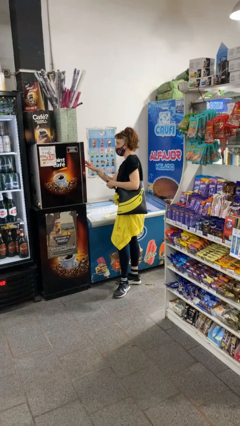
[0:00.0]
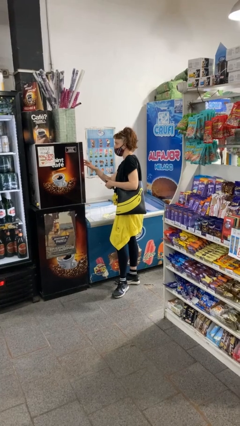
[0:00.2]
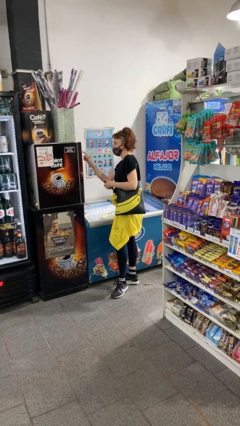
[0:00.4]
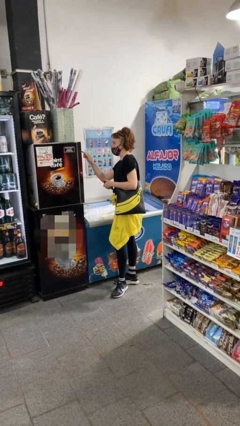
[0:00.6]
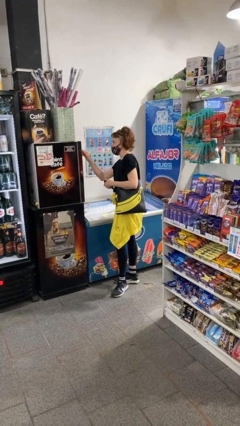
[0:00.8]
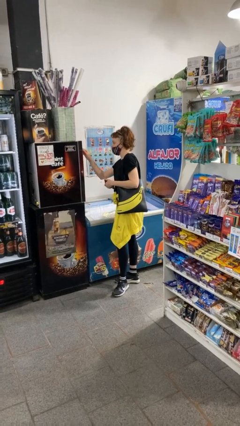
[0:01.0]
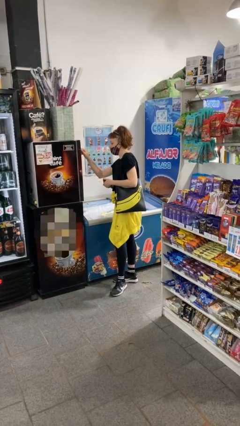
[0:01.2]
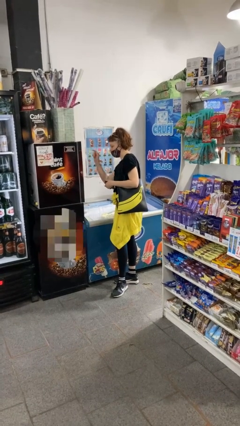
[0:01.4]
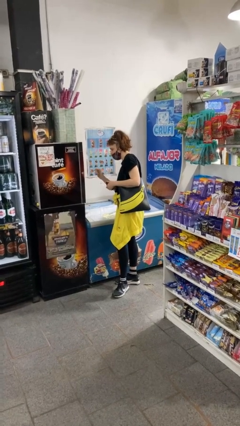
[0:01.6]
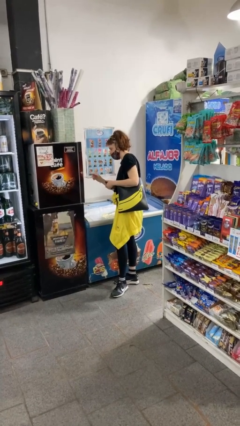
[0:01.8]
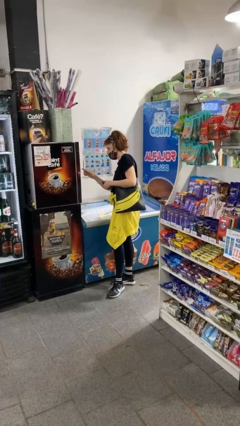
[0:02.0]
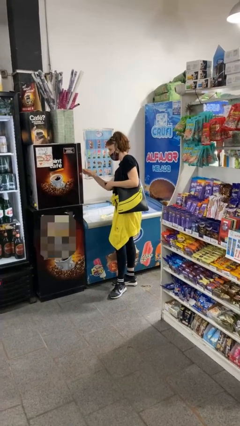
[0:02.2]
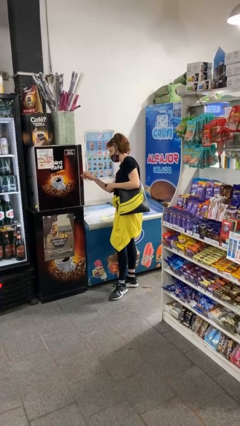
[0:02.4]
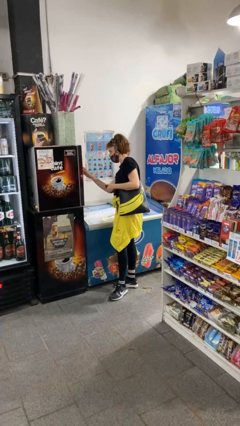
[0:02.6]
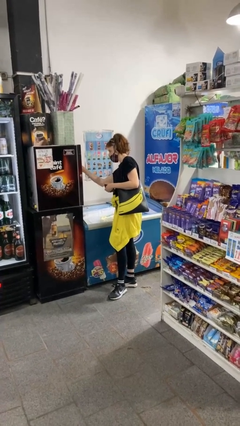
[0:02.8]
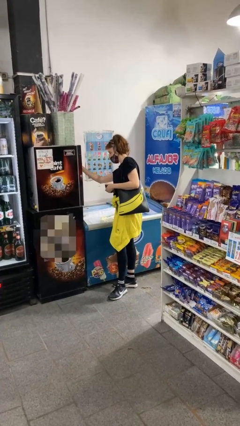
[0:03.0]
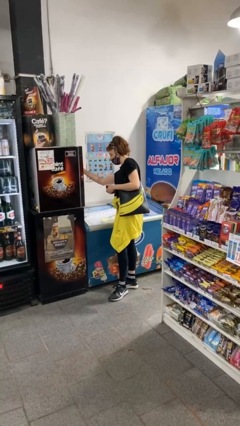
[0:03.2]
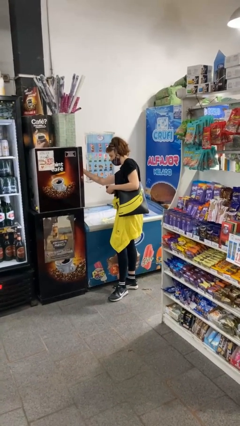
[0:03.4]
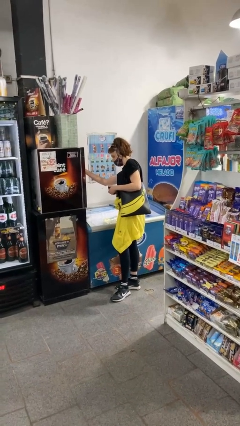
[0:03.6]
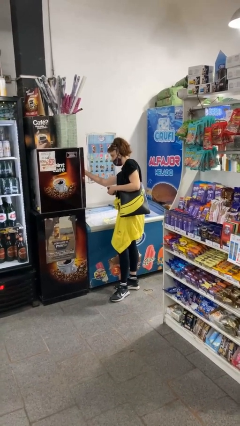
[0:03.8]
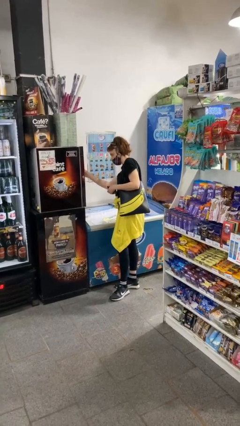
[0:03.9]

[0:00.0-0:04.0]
person purchases from machine

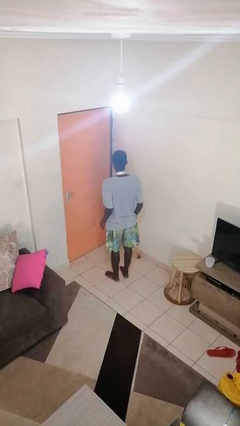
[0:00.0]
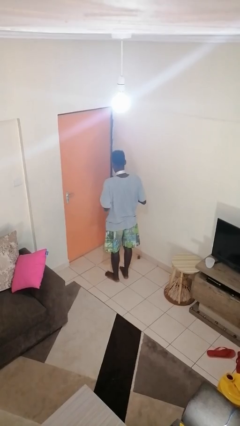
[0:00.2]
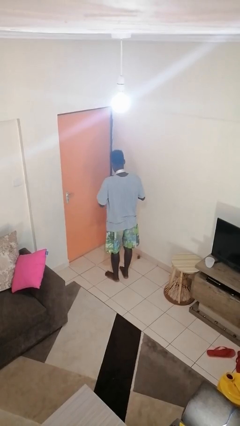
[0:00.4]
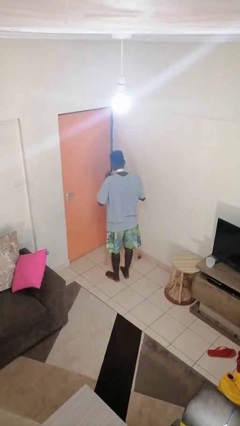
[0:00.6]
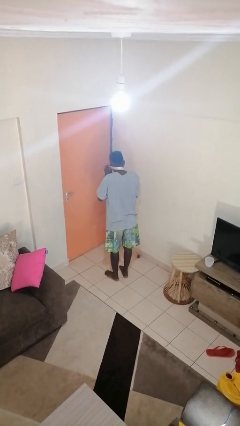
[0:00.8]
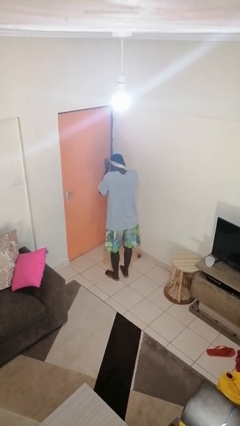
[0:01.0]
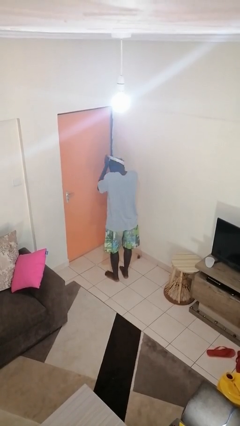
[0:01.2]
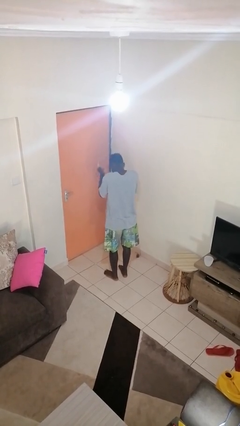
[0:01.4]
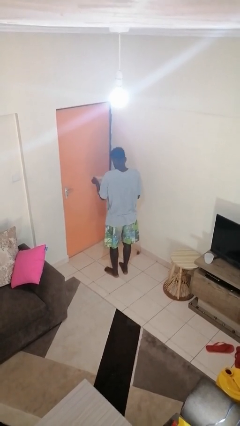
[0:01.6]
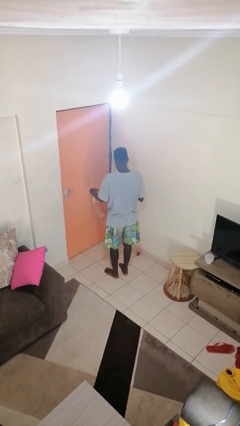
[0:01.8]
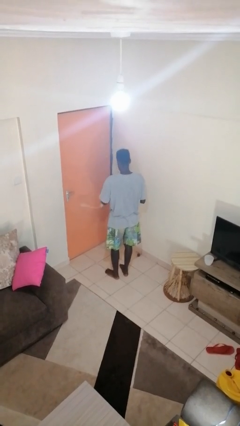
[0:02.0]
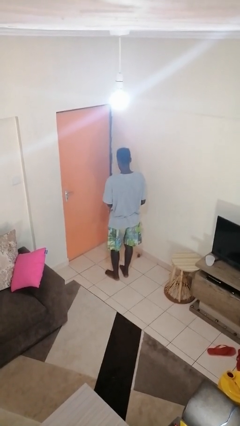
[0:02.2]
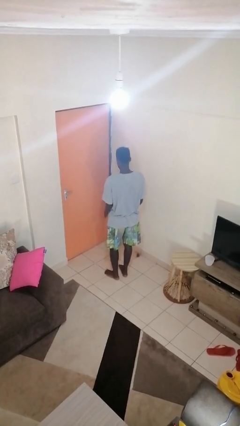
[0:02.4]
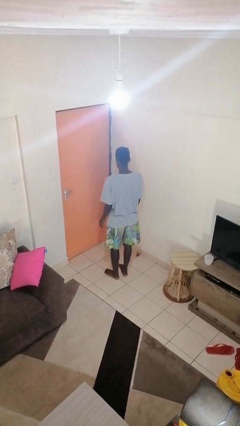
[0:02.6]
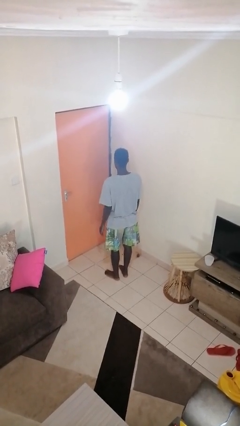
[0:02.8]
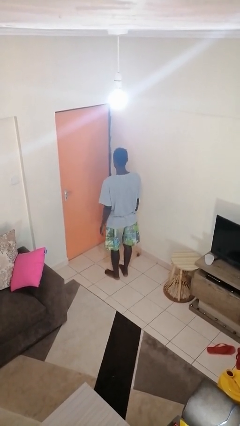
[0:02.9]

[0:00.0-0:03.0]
person takes off necktie

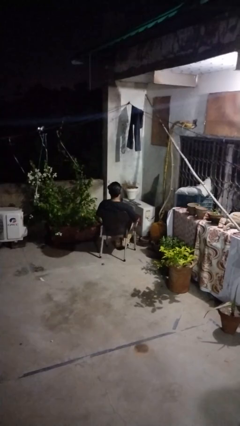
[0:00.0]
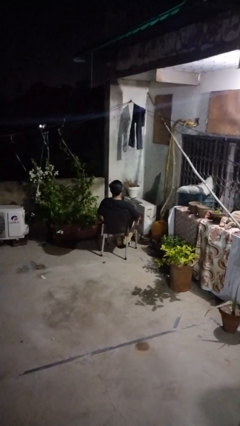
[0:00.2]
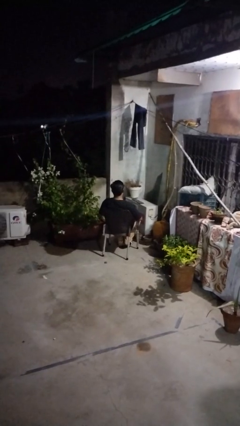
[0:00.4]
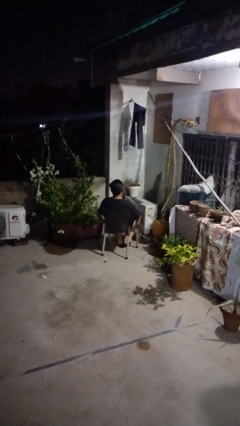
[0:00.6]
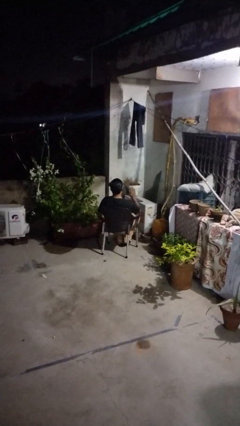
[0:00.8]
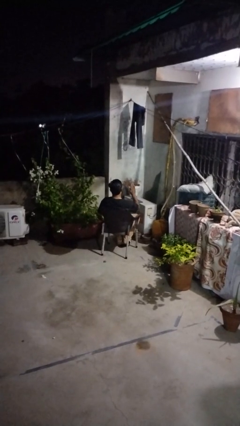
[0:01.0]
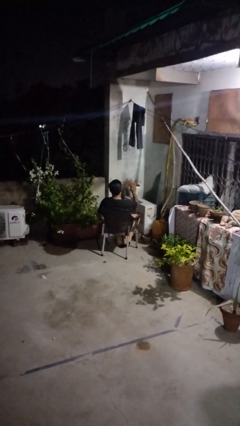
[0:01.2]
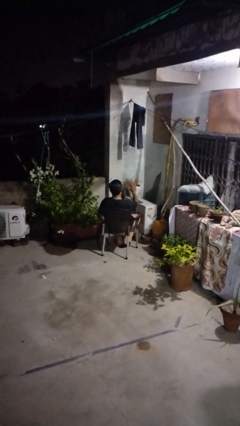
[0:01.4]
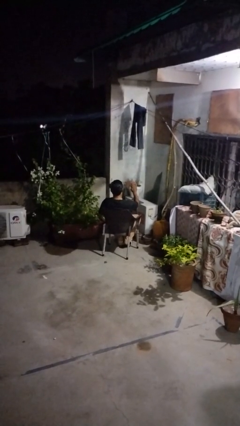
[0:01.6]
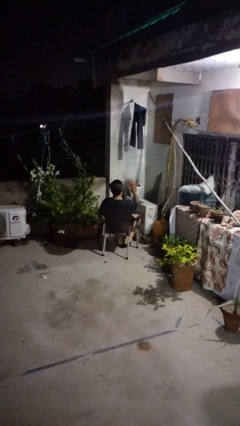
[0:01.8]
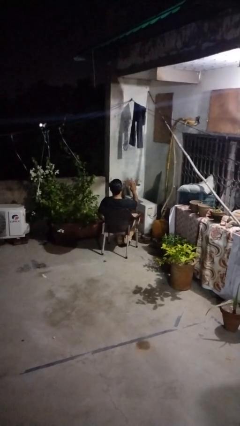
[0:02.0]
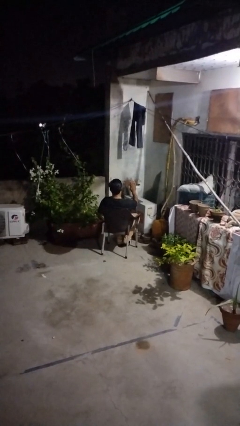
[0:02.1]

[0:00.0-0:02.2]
person gestures stop

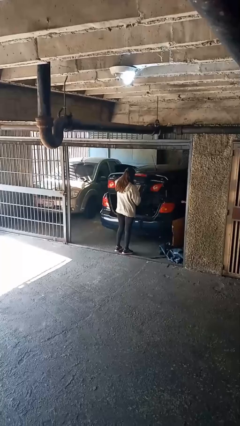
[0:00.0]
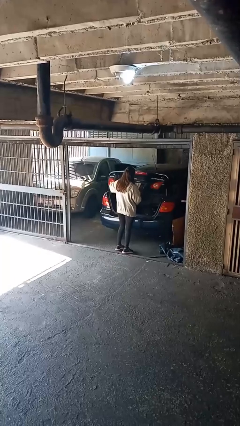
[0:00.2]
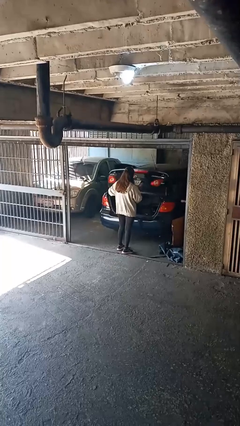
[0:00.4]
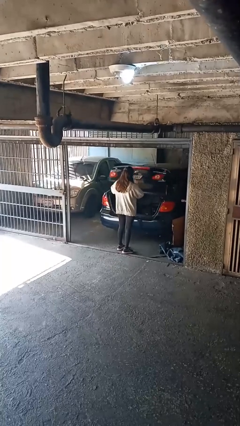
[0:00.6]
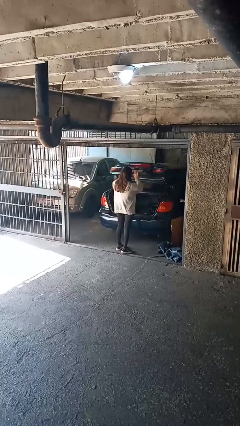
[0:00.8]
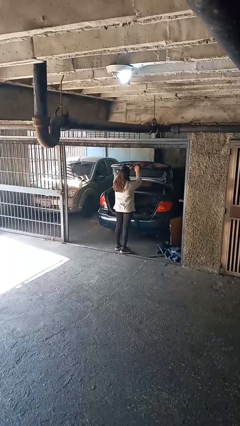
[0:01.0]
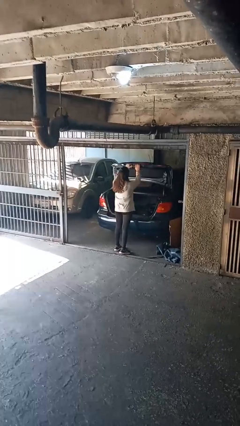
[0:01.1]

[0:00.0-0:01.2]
person opens car trunk

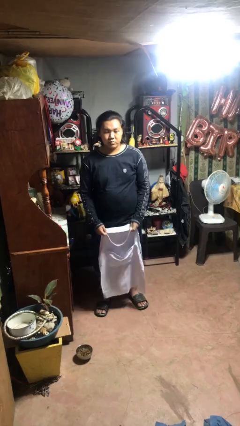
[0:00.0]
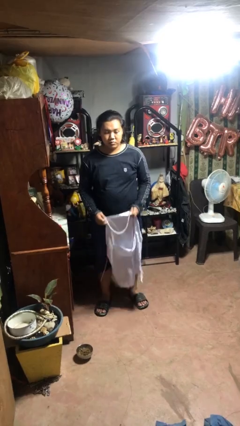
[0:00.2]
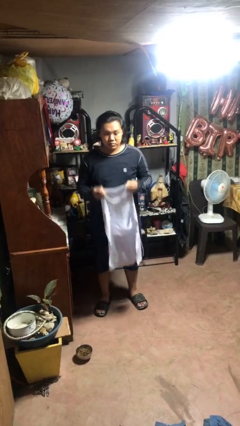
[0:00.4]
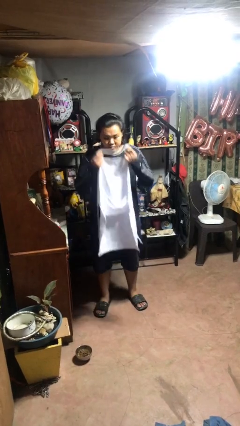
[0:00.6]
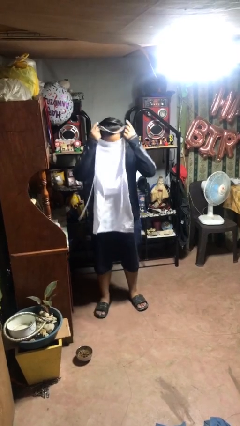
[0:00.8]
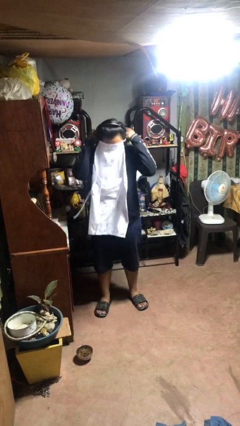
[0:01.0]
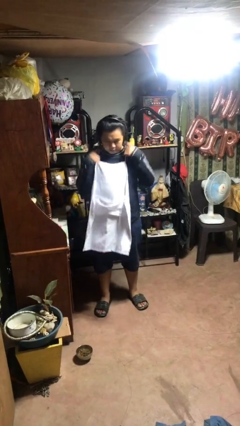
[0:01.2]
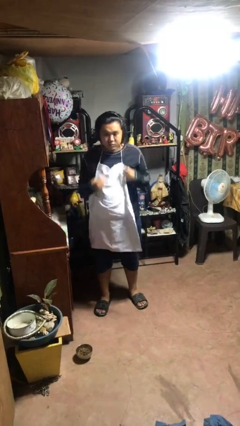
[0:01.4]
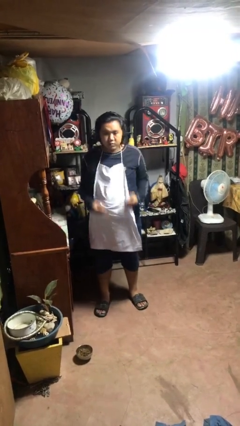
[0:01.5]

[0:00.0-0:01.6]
person puts on apron

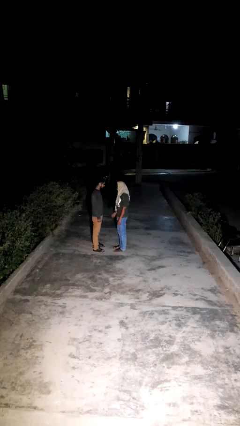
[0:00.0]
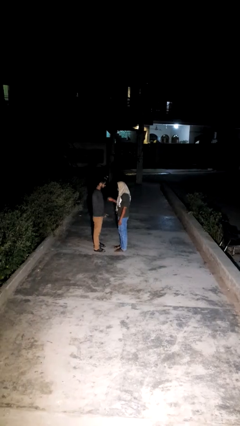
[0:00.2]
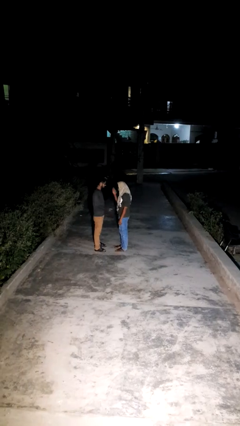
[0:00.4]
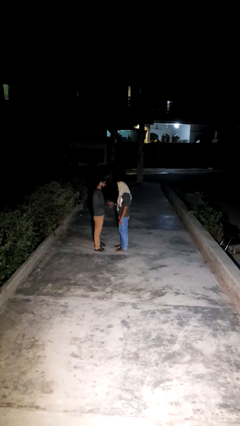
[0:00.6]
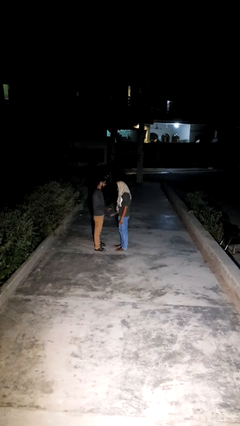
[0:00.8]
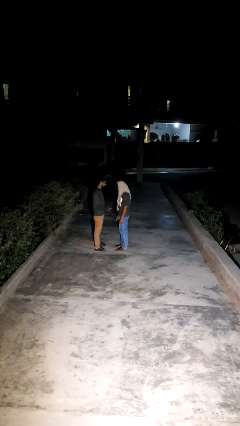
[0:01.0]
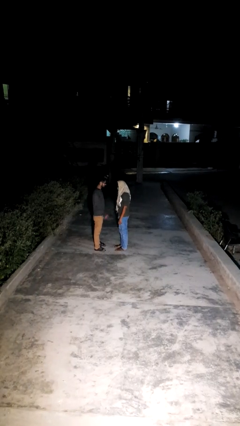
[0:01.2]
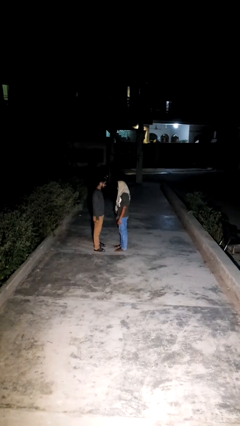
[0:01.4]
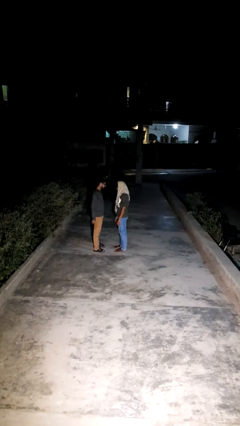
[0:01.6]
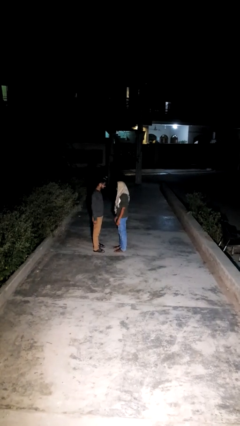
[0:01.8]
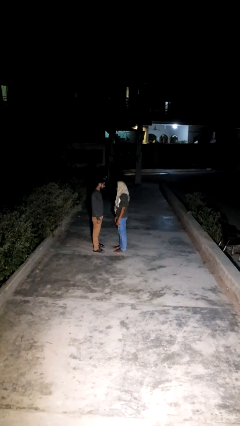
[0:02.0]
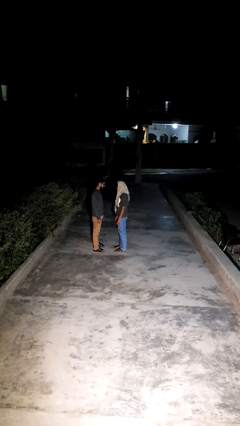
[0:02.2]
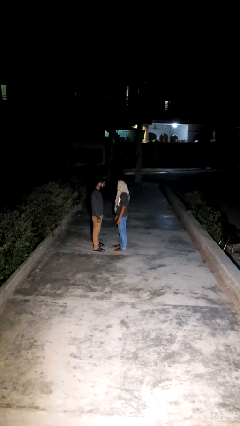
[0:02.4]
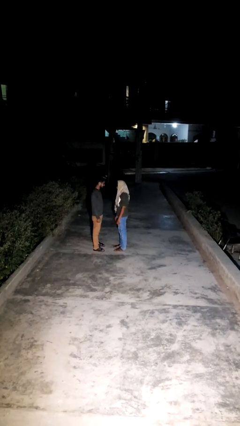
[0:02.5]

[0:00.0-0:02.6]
person highfives hand

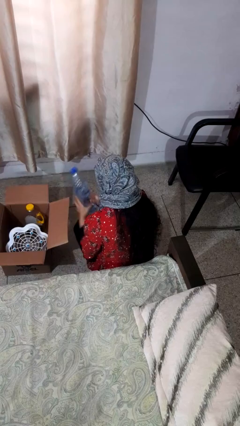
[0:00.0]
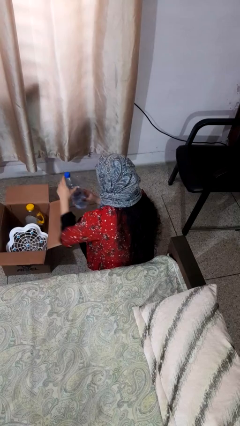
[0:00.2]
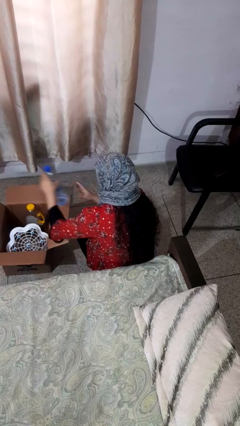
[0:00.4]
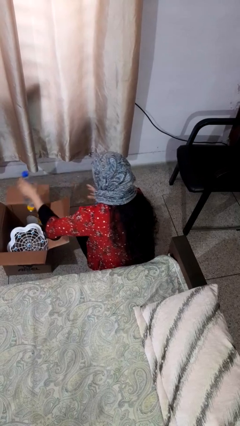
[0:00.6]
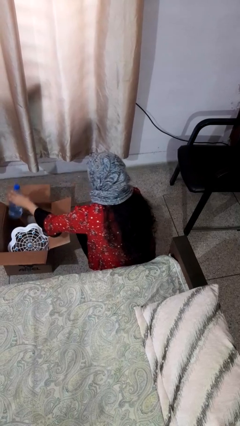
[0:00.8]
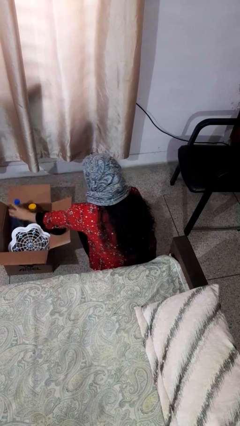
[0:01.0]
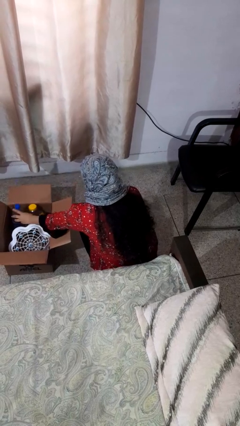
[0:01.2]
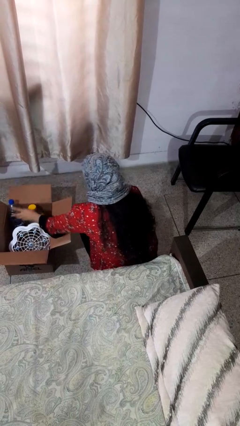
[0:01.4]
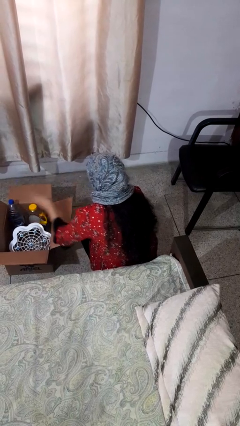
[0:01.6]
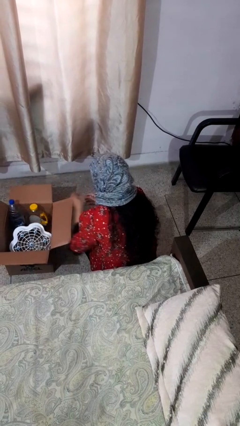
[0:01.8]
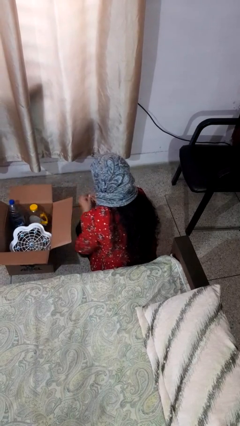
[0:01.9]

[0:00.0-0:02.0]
person puts object into box
